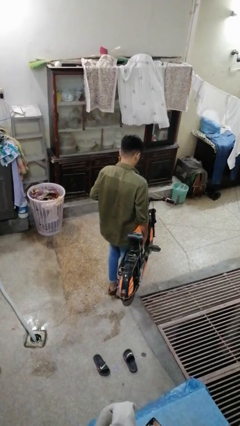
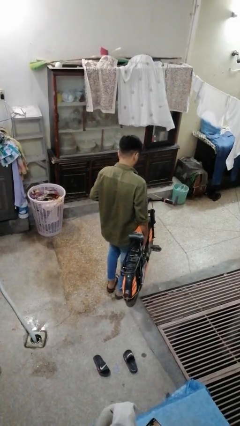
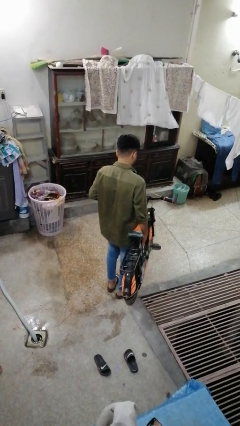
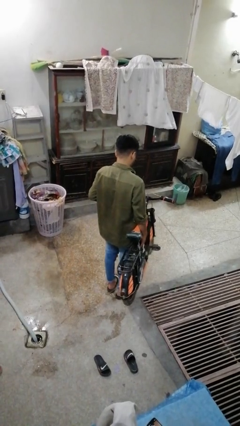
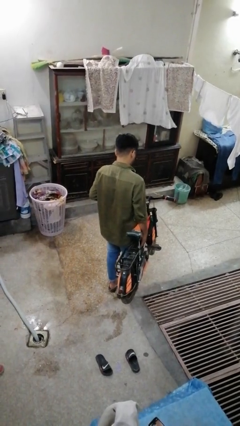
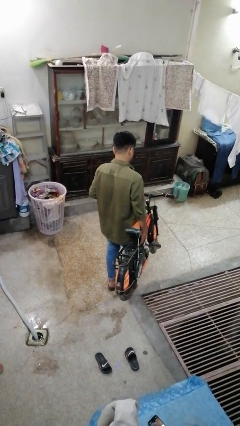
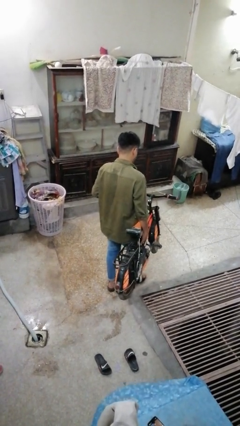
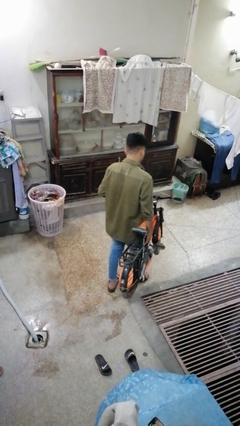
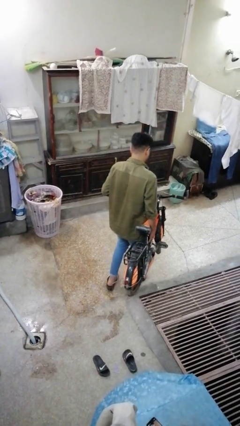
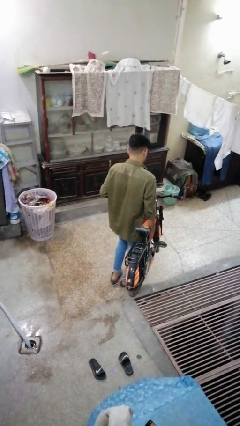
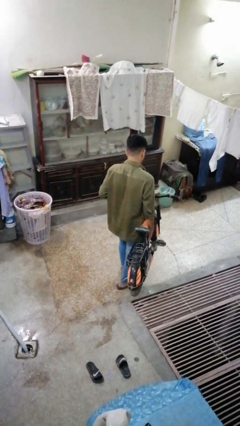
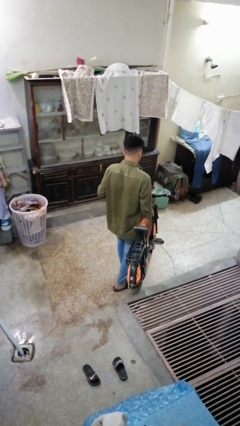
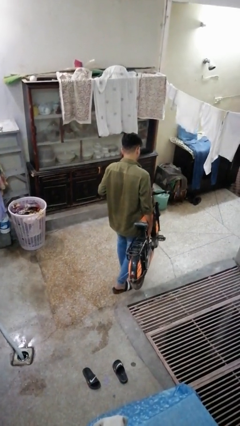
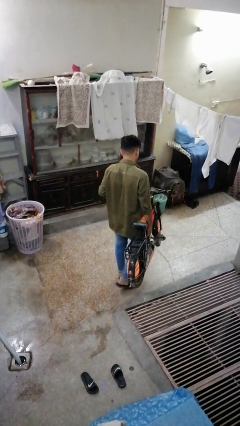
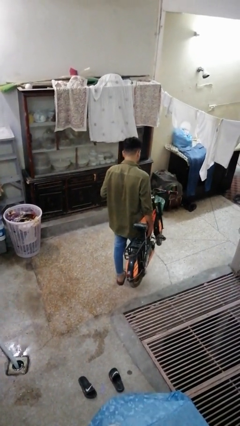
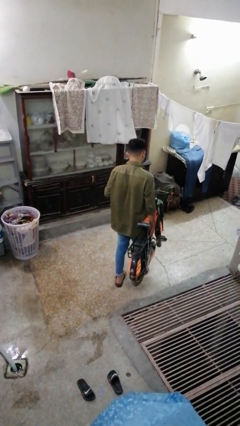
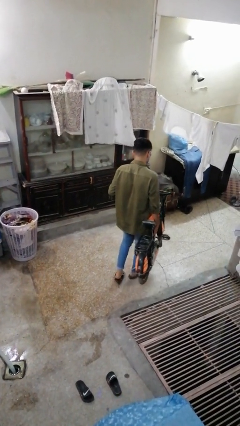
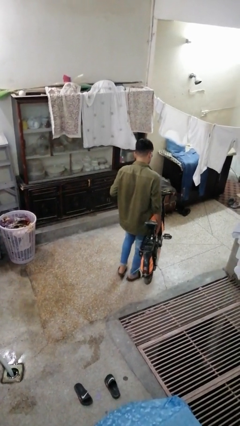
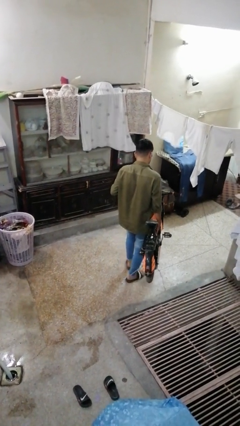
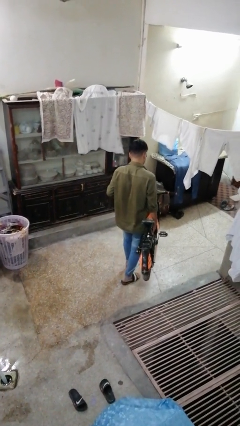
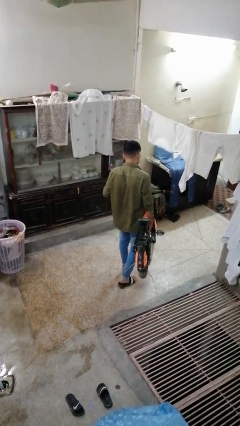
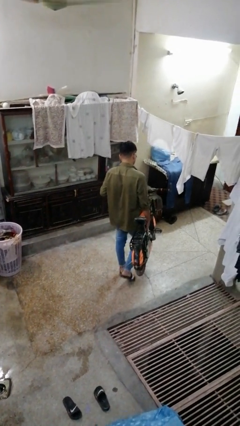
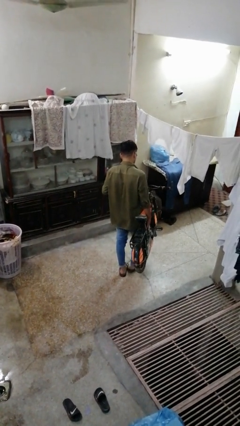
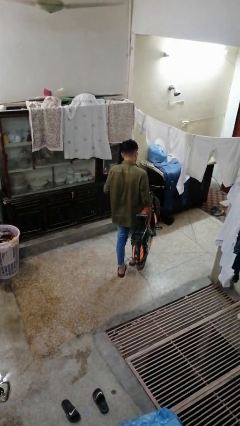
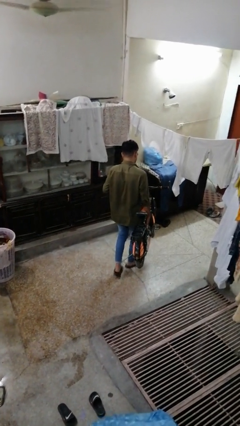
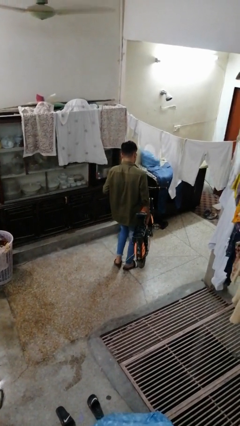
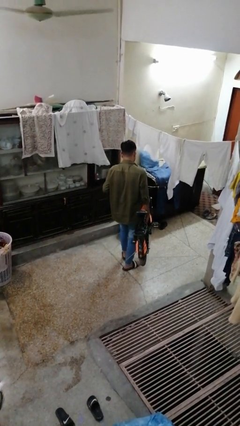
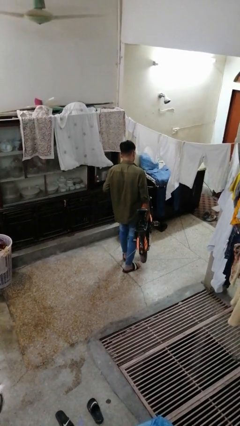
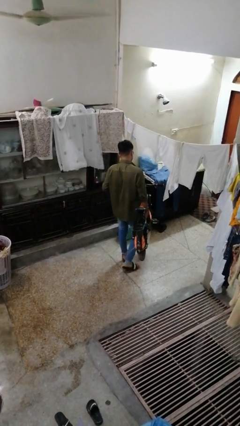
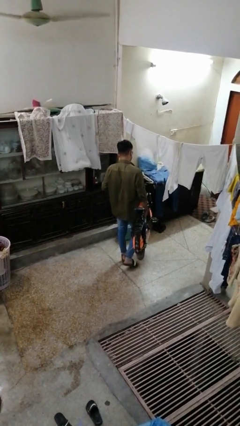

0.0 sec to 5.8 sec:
person carries bicycle

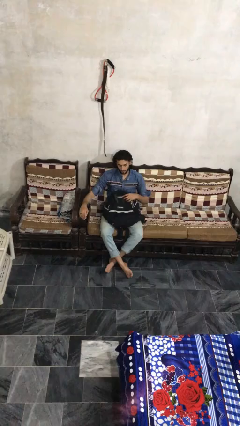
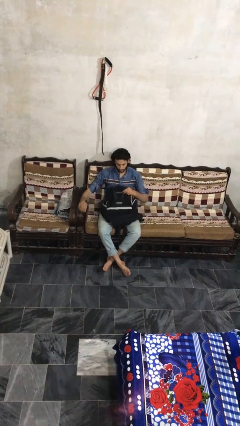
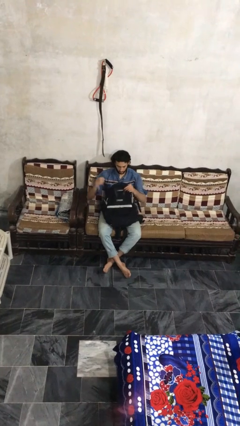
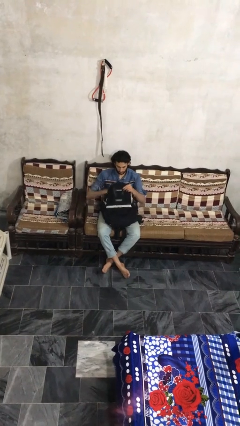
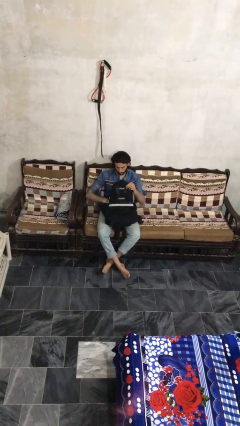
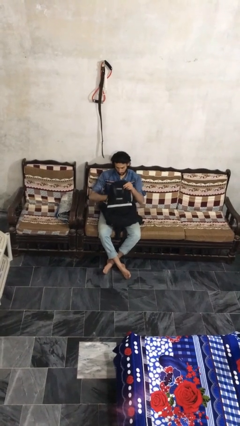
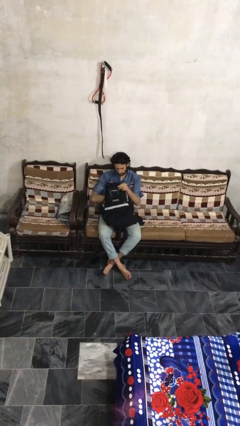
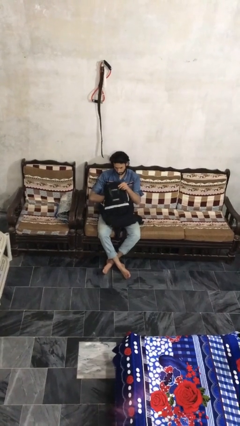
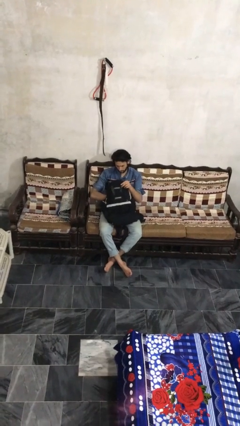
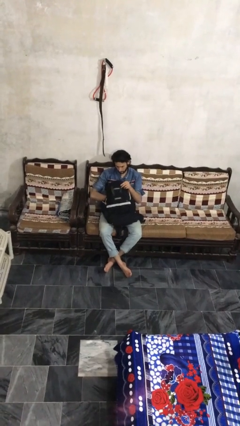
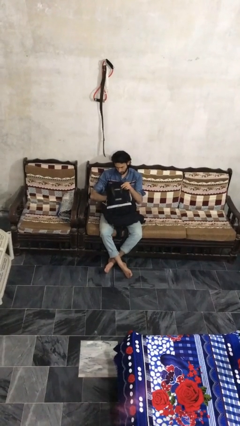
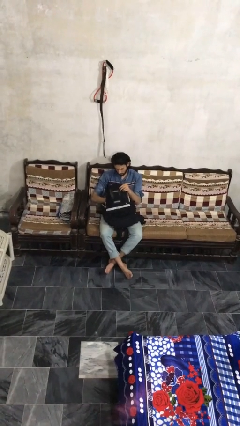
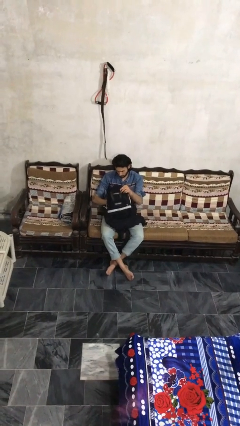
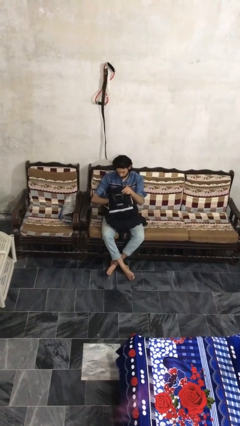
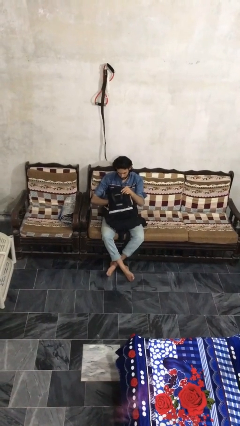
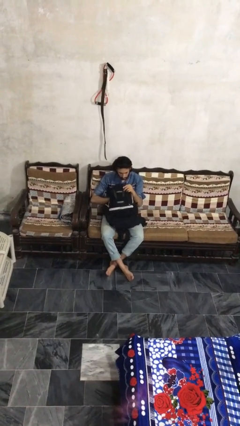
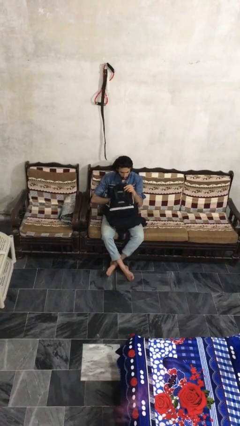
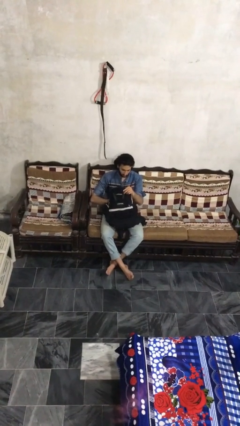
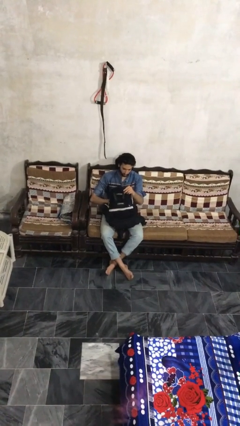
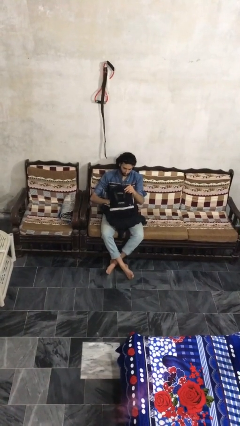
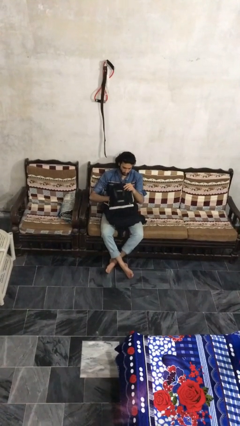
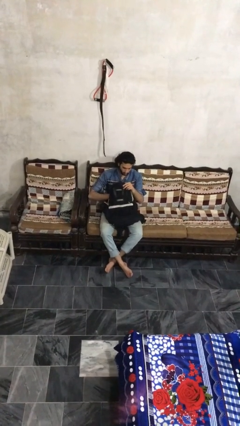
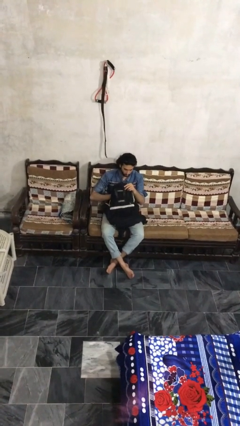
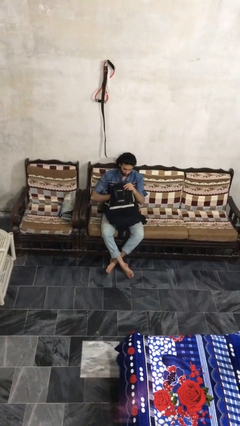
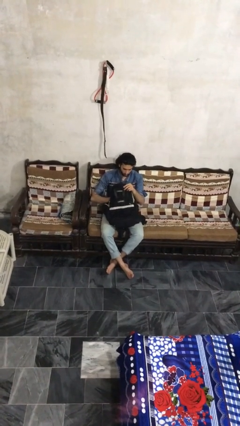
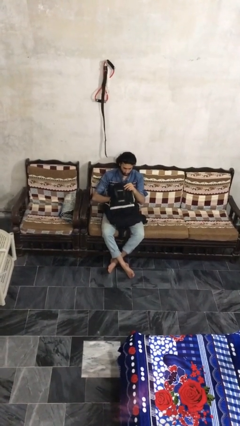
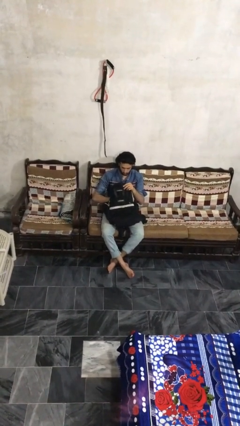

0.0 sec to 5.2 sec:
person searches in backpack

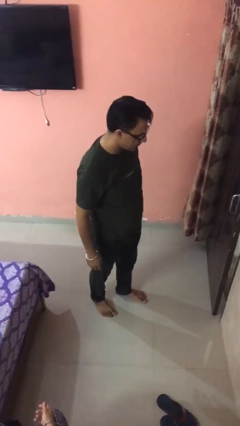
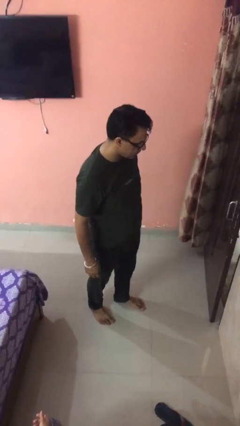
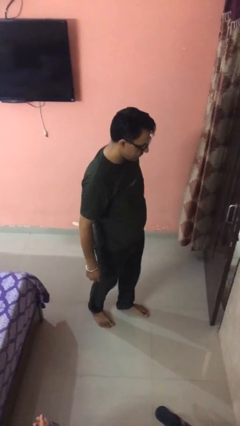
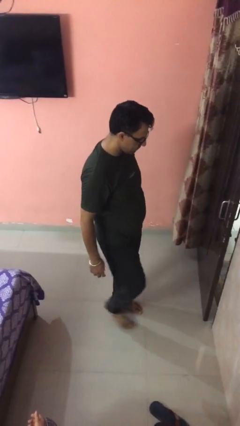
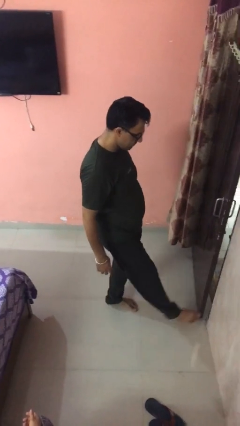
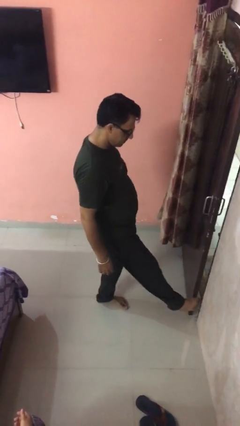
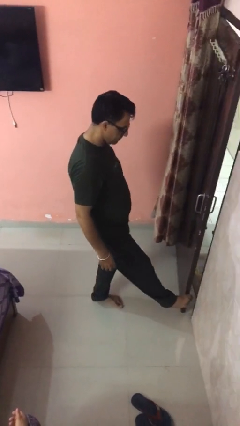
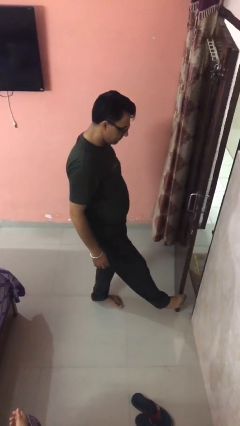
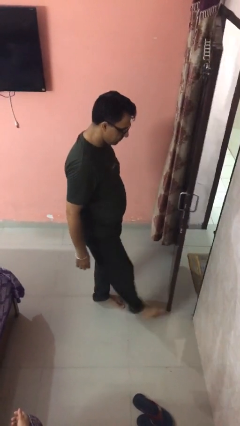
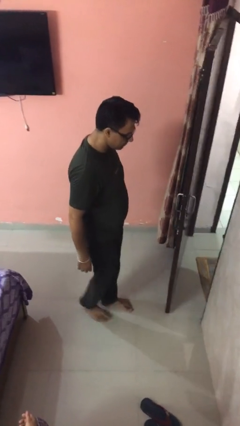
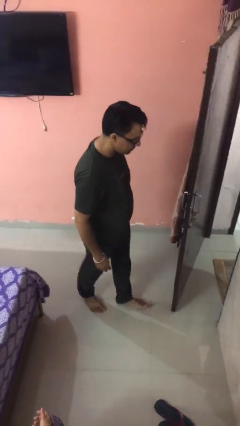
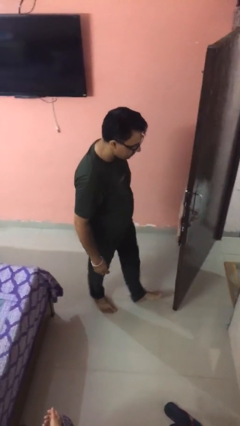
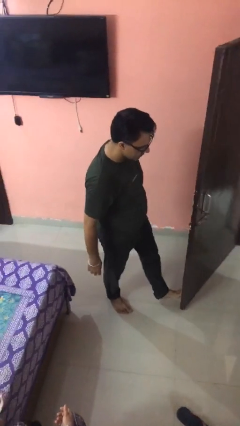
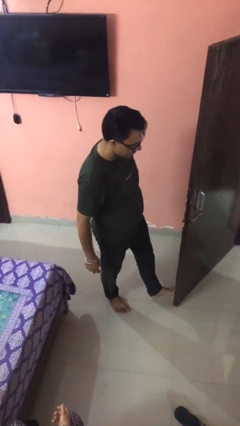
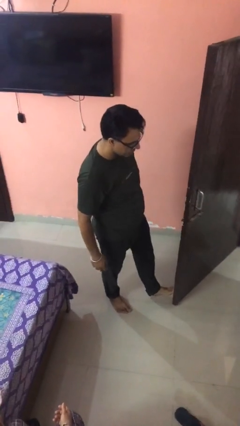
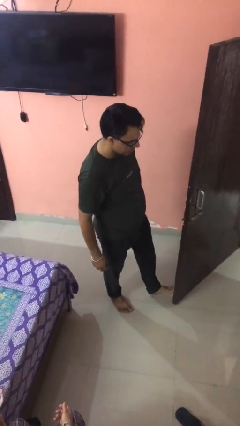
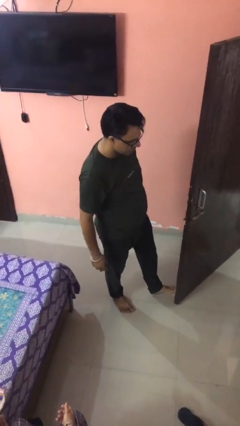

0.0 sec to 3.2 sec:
person opens facility door

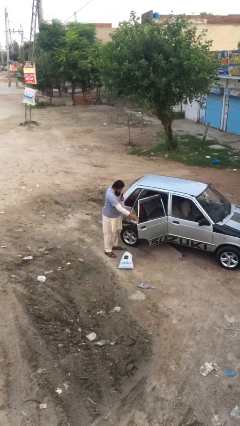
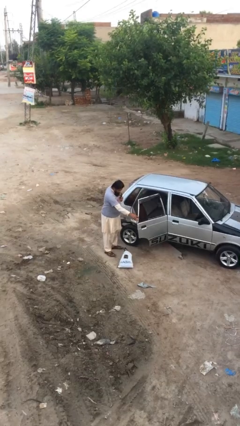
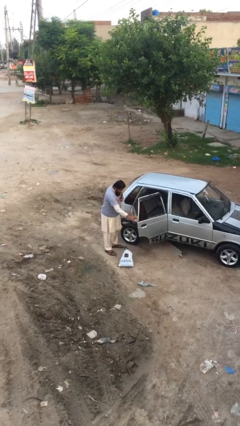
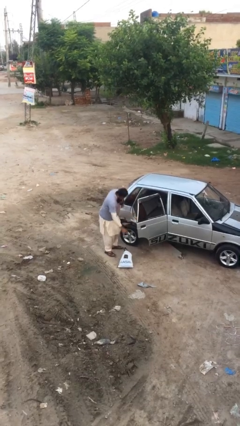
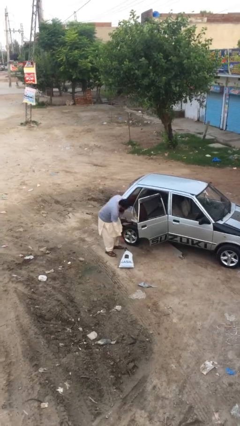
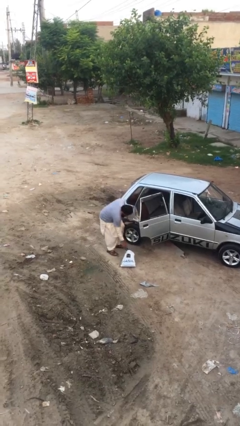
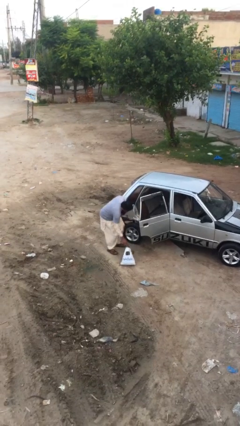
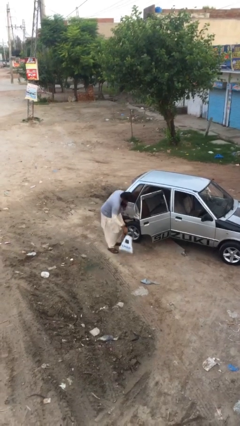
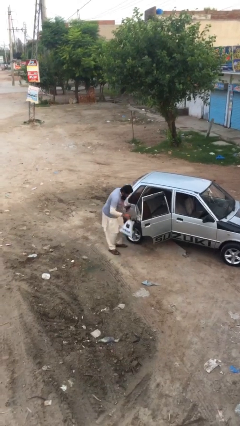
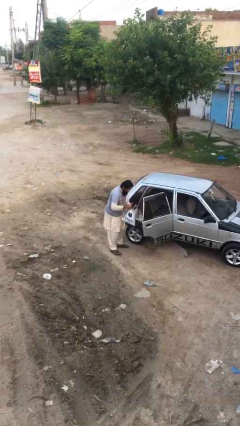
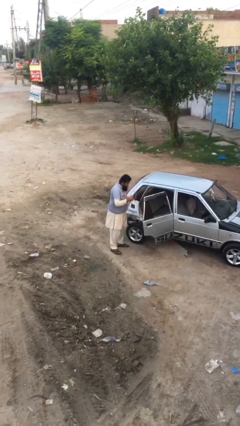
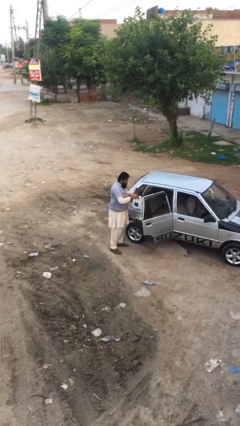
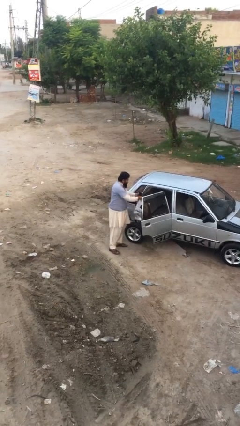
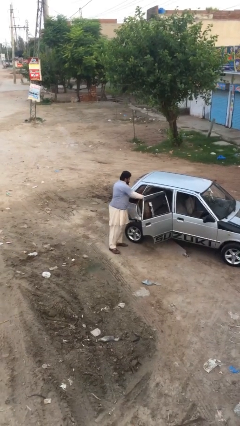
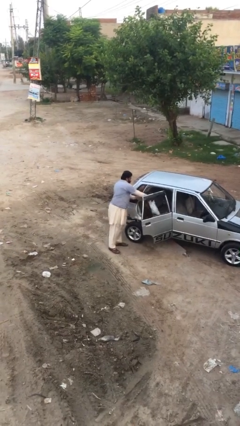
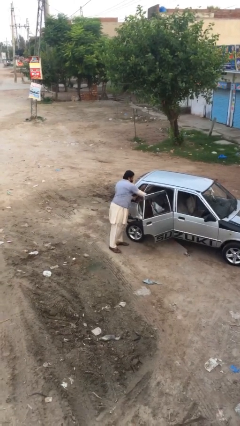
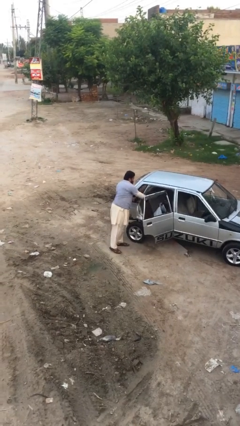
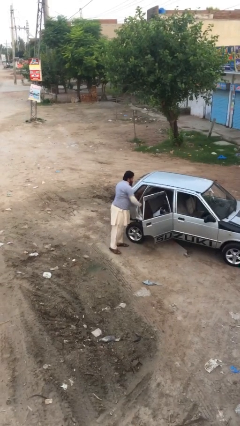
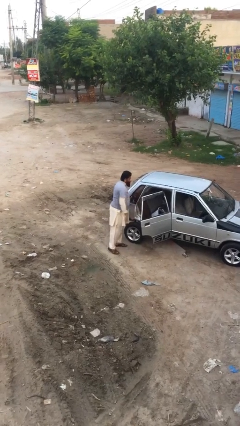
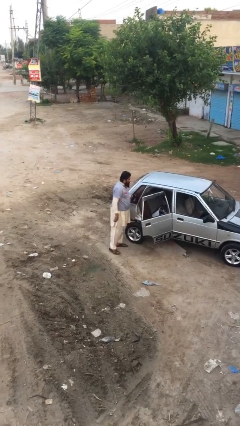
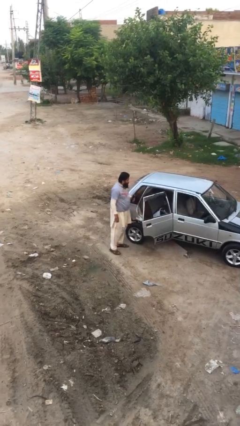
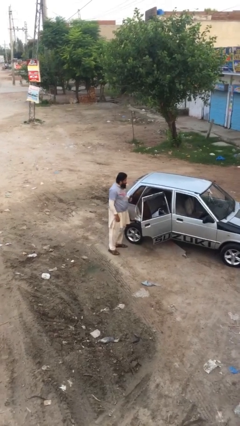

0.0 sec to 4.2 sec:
person loads car
